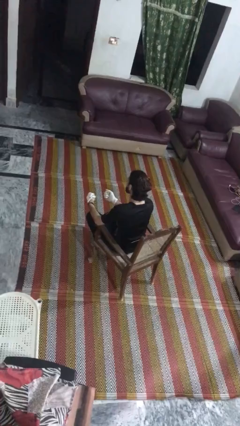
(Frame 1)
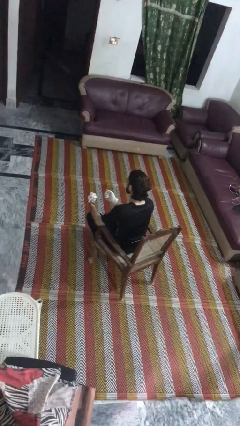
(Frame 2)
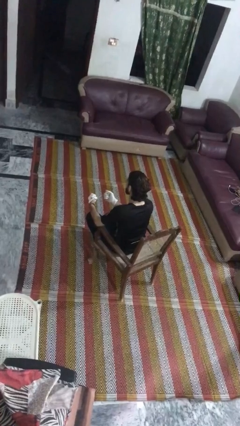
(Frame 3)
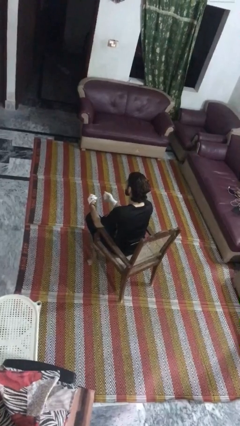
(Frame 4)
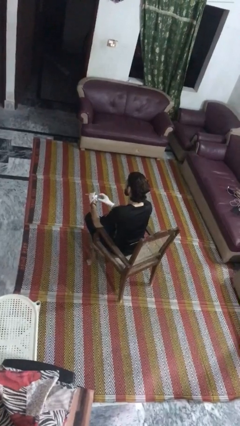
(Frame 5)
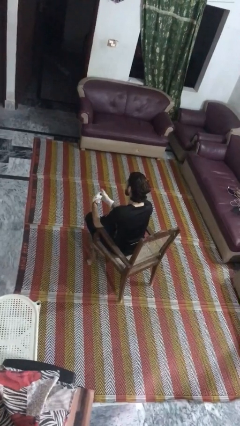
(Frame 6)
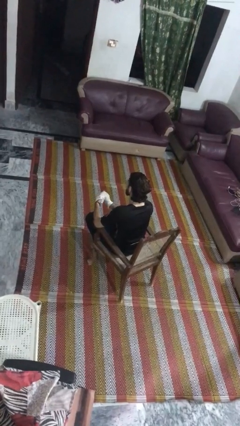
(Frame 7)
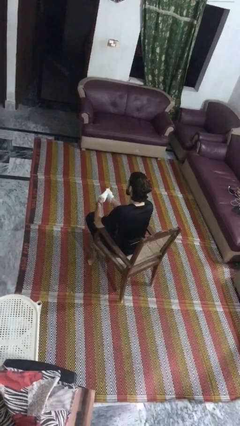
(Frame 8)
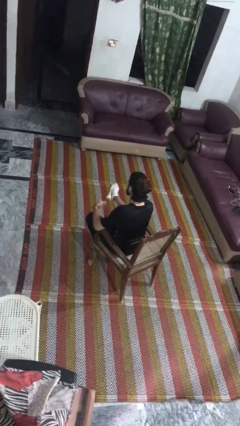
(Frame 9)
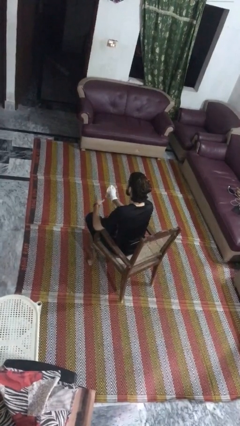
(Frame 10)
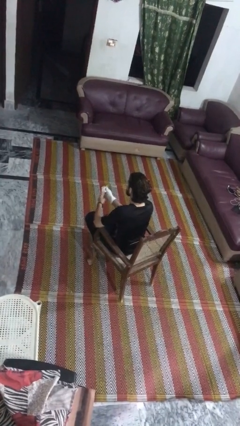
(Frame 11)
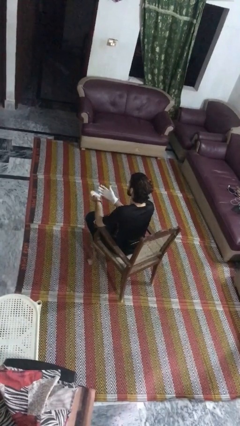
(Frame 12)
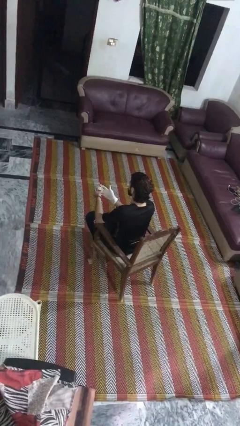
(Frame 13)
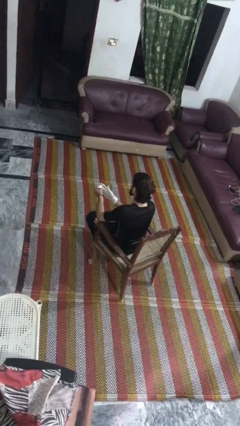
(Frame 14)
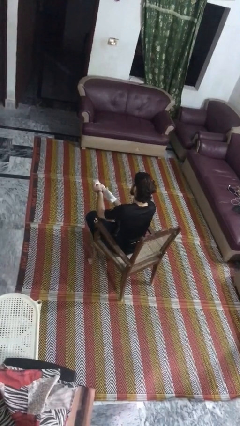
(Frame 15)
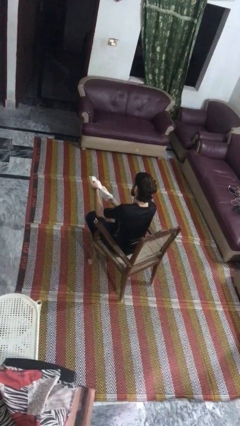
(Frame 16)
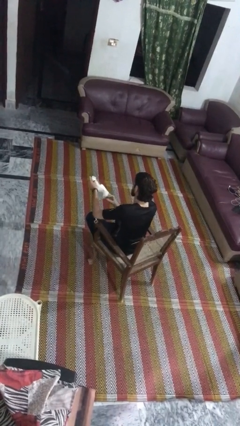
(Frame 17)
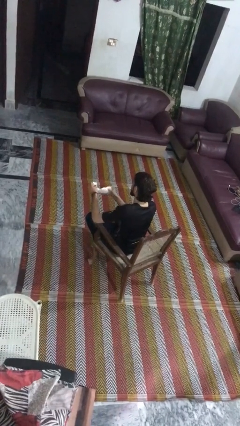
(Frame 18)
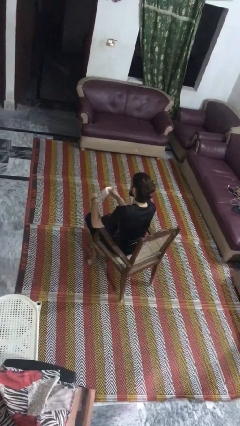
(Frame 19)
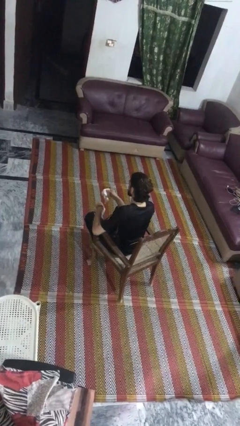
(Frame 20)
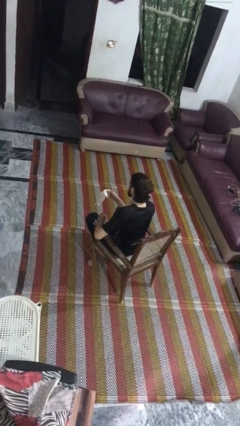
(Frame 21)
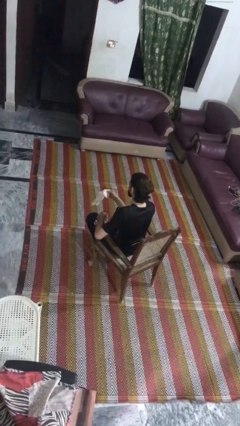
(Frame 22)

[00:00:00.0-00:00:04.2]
person takes off gloves

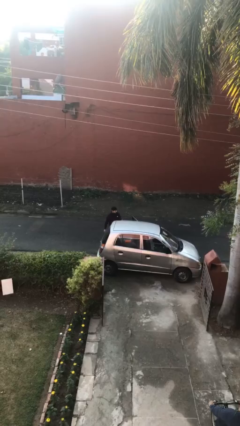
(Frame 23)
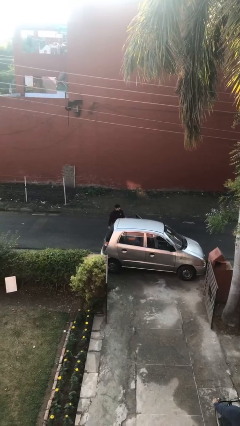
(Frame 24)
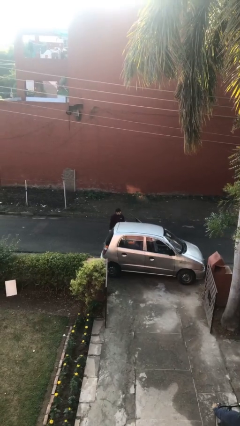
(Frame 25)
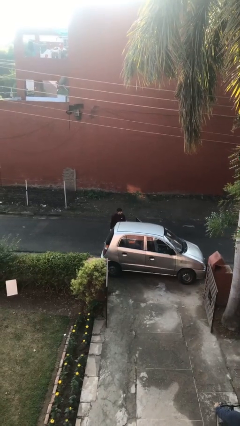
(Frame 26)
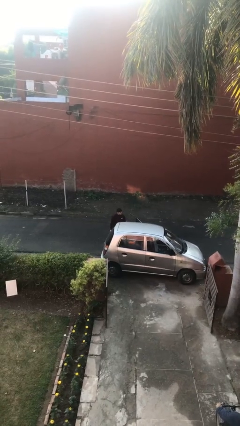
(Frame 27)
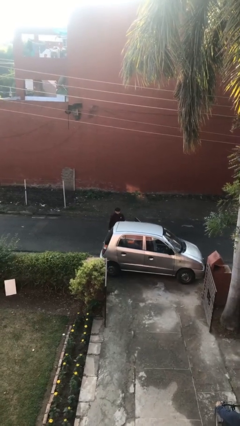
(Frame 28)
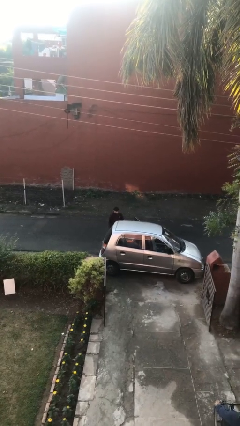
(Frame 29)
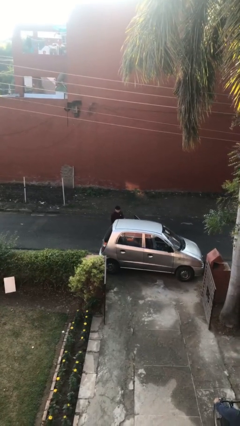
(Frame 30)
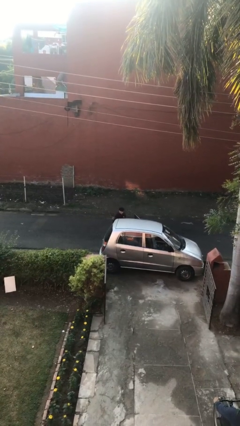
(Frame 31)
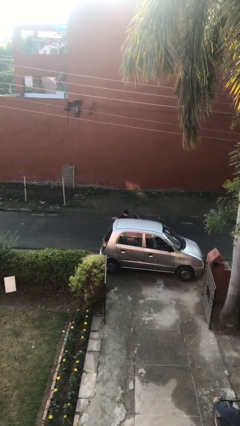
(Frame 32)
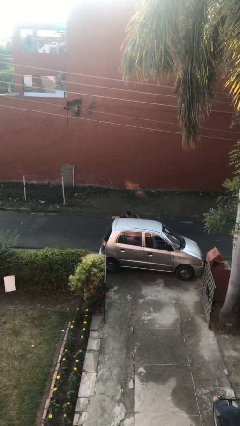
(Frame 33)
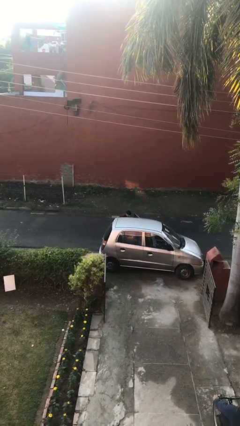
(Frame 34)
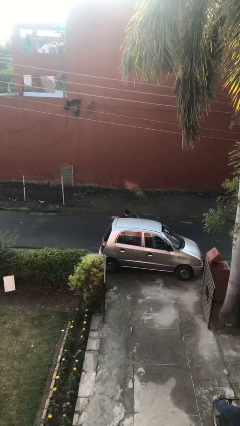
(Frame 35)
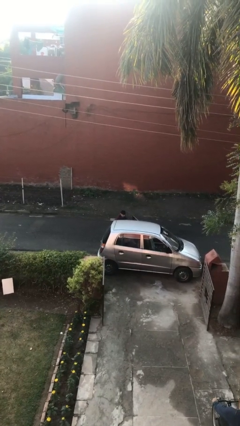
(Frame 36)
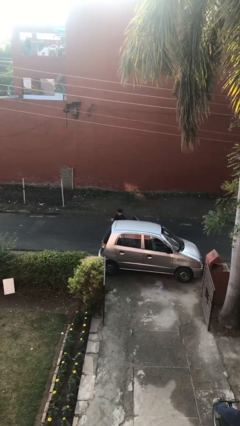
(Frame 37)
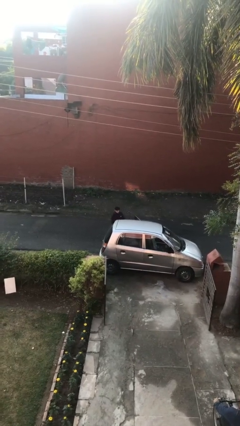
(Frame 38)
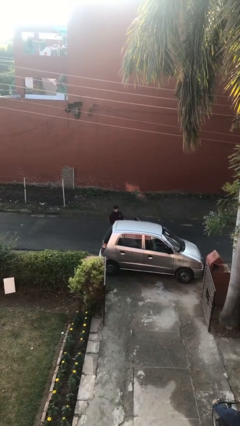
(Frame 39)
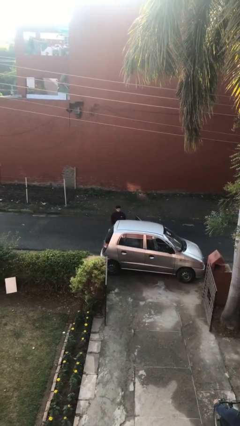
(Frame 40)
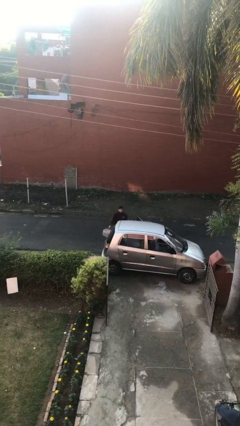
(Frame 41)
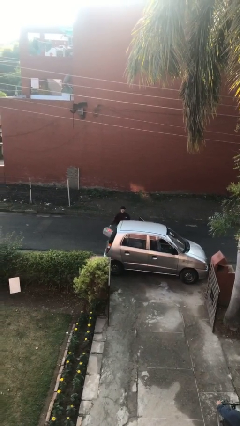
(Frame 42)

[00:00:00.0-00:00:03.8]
person unloads car

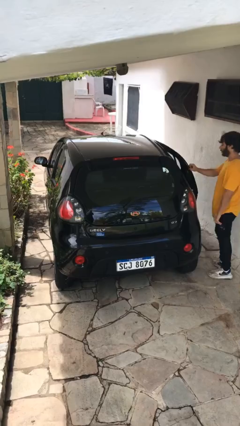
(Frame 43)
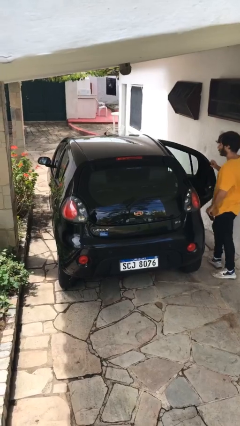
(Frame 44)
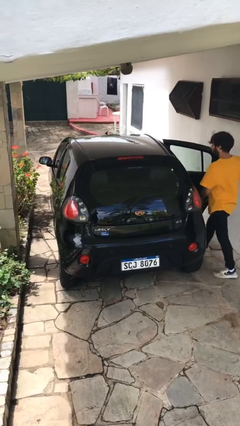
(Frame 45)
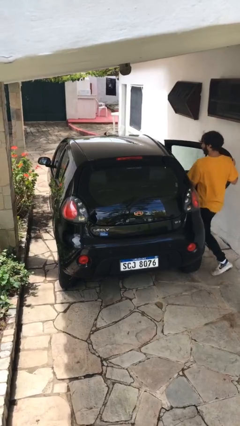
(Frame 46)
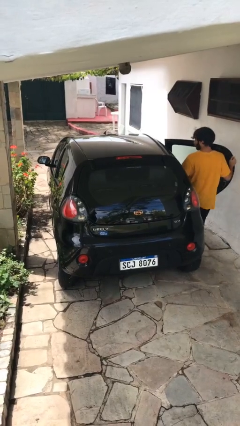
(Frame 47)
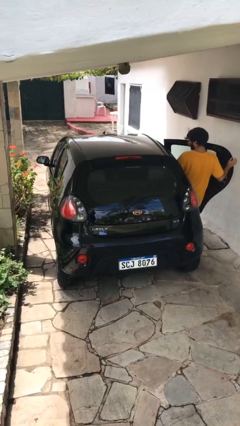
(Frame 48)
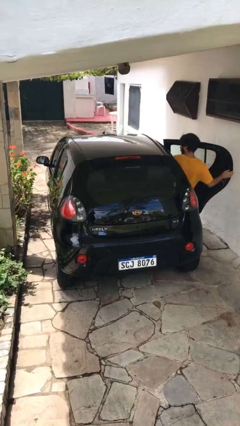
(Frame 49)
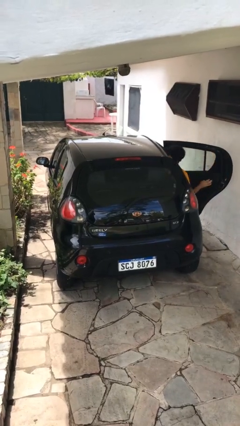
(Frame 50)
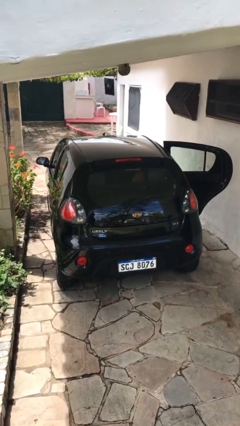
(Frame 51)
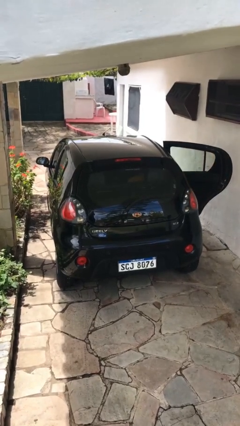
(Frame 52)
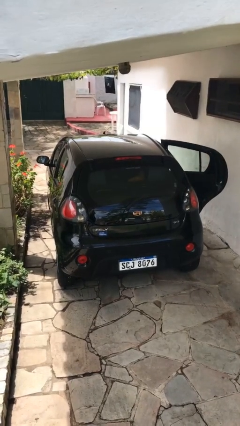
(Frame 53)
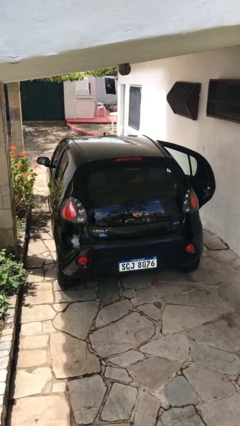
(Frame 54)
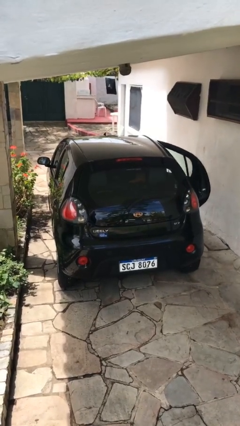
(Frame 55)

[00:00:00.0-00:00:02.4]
car picks up person

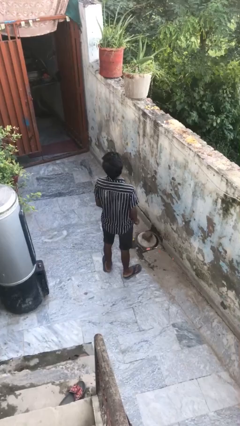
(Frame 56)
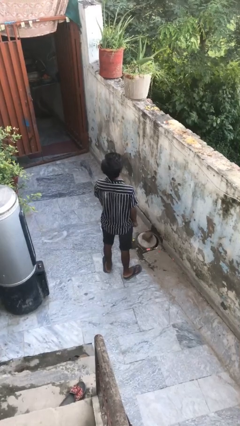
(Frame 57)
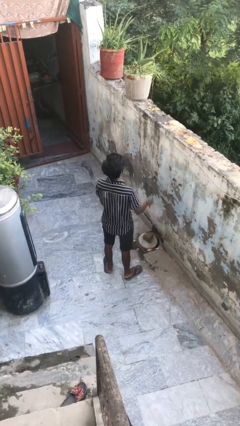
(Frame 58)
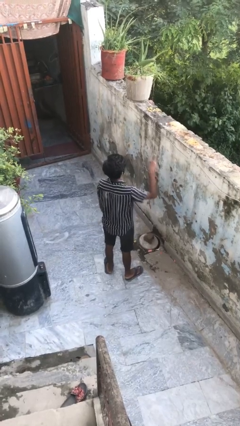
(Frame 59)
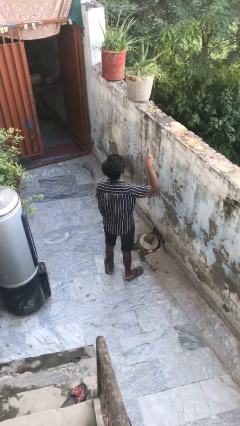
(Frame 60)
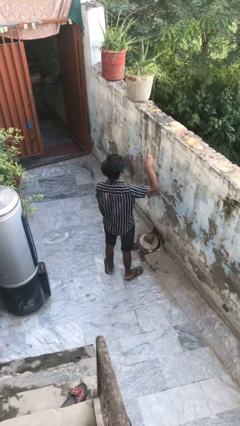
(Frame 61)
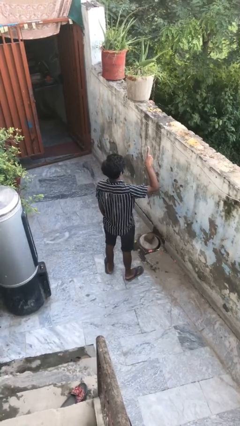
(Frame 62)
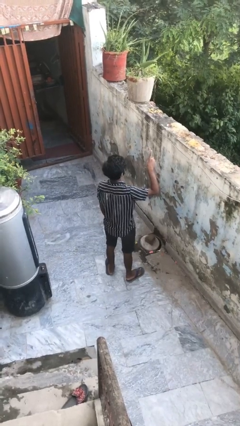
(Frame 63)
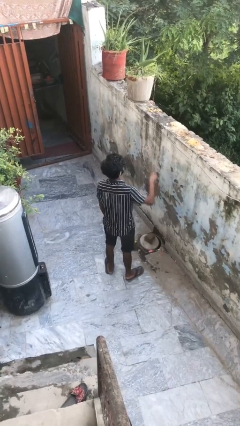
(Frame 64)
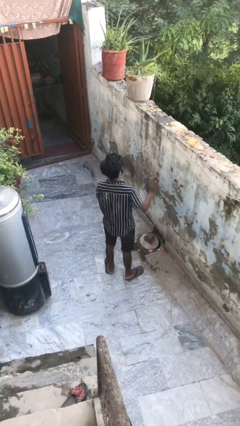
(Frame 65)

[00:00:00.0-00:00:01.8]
person gestures number one

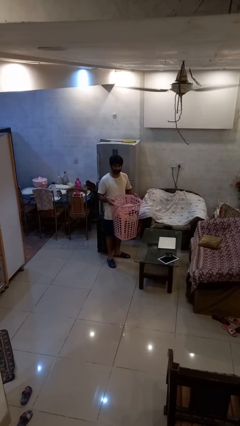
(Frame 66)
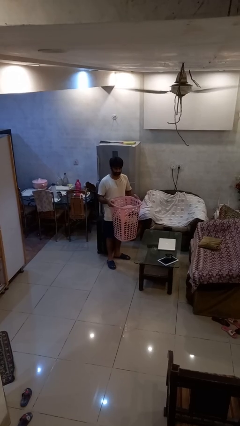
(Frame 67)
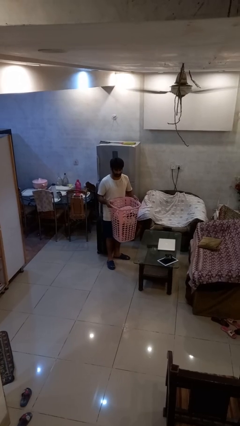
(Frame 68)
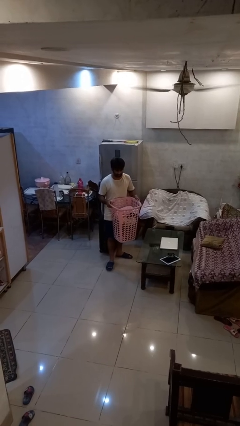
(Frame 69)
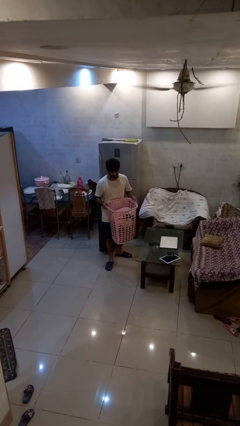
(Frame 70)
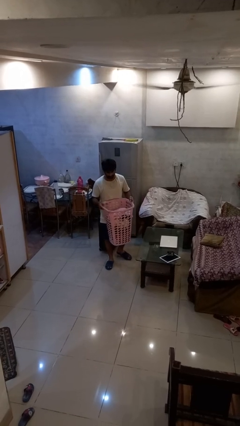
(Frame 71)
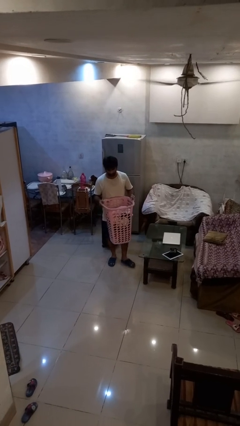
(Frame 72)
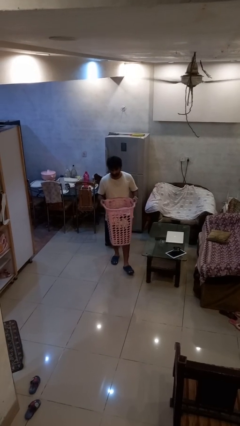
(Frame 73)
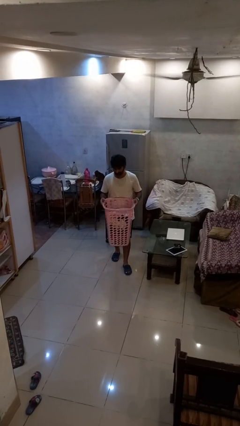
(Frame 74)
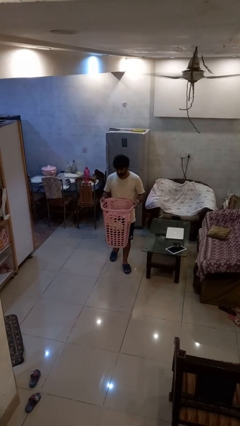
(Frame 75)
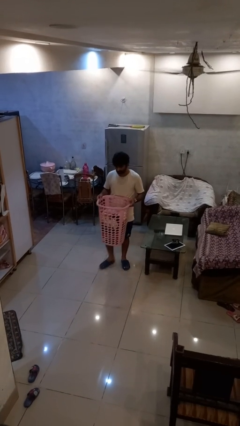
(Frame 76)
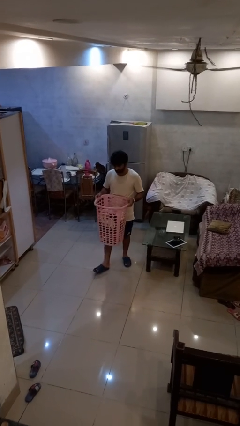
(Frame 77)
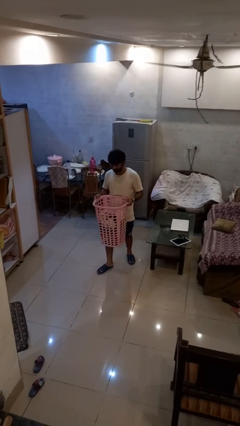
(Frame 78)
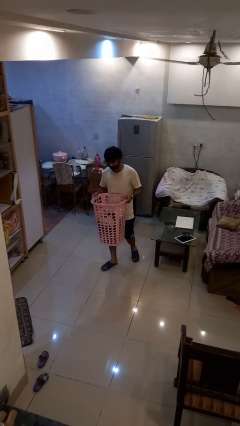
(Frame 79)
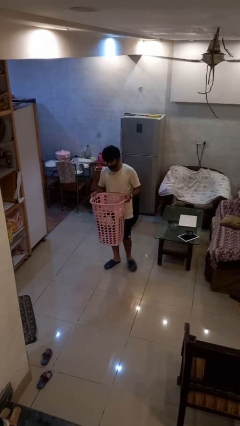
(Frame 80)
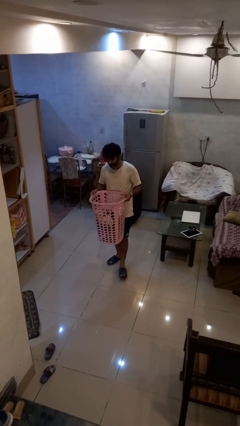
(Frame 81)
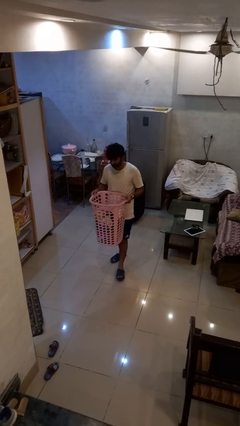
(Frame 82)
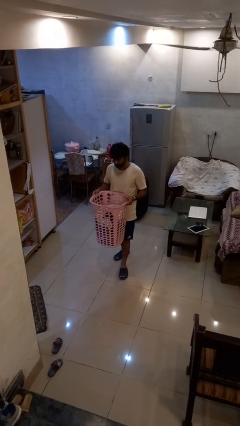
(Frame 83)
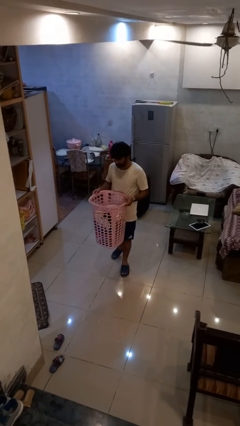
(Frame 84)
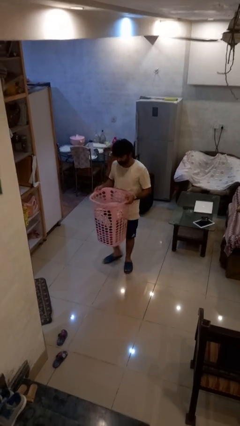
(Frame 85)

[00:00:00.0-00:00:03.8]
person carries laundry basket

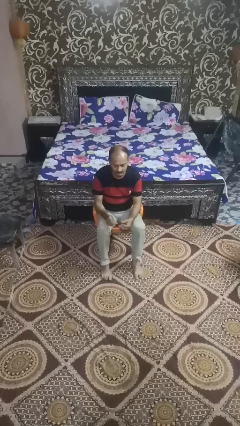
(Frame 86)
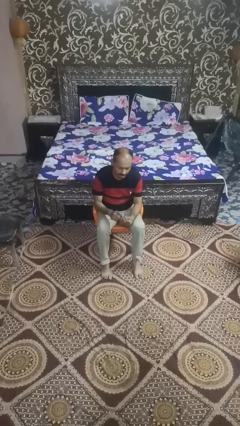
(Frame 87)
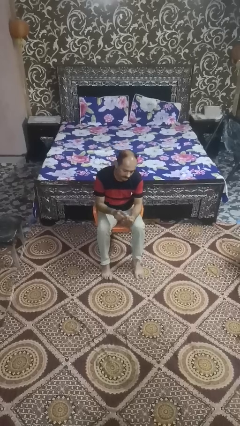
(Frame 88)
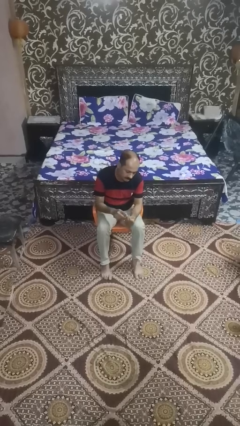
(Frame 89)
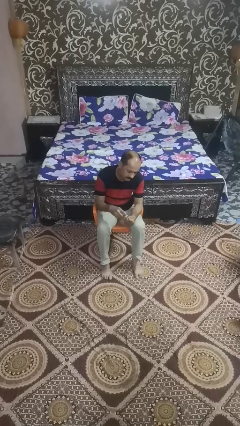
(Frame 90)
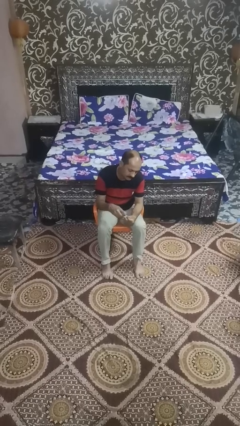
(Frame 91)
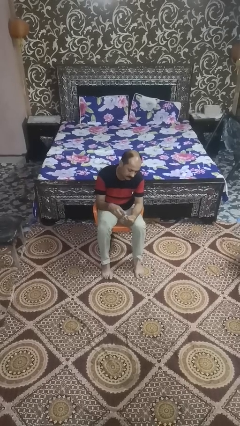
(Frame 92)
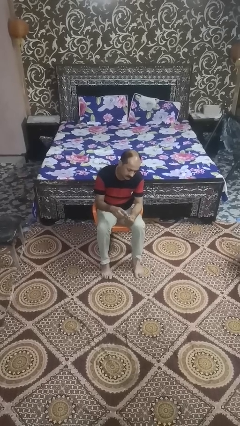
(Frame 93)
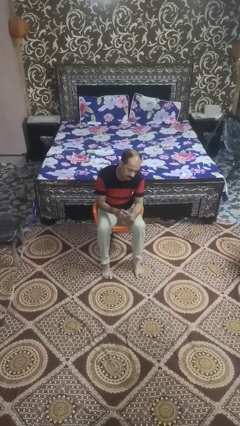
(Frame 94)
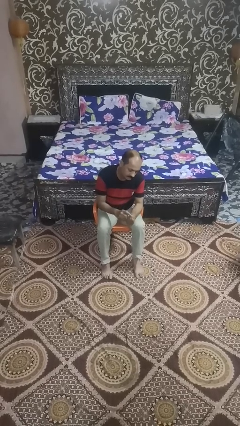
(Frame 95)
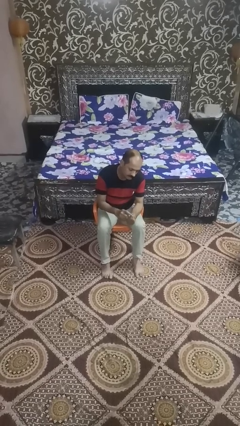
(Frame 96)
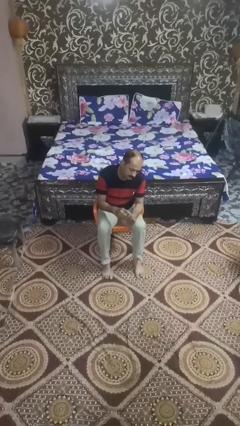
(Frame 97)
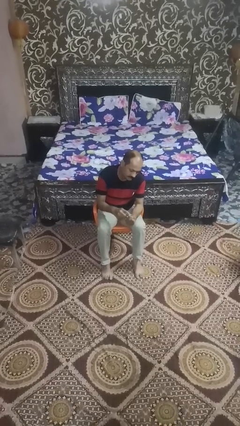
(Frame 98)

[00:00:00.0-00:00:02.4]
person files fingernails
